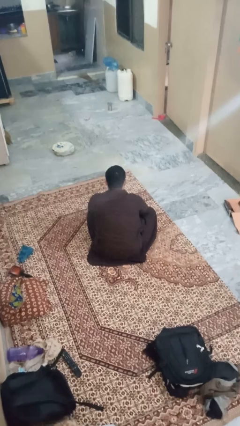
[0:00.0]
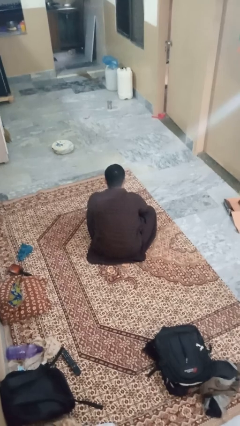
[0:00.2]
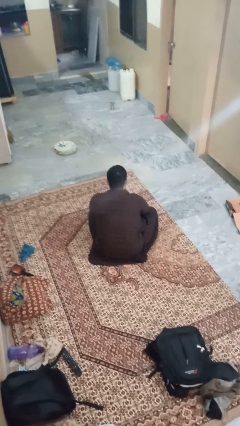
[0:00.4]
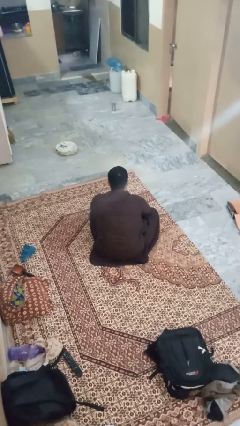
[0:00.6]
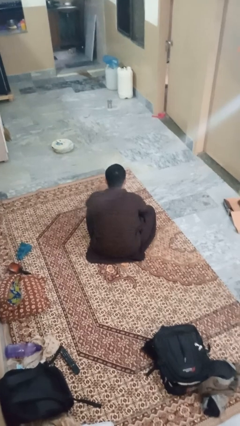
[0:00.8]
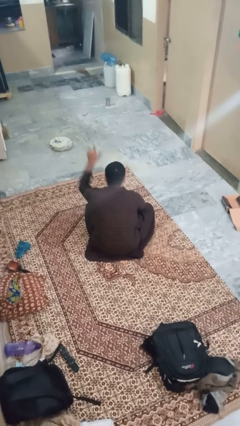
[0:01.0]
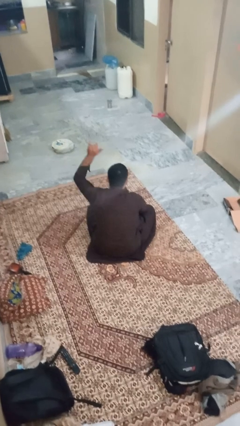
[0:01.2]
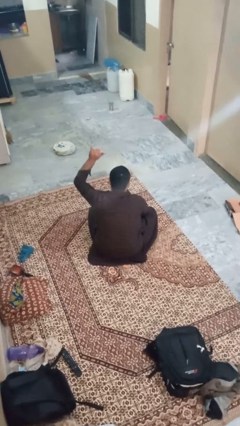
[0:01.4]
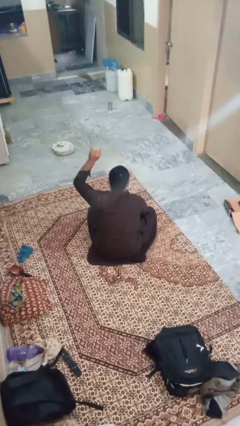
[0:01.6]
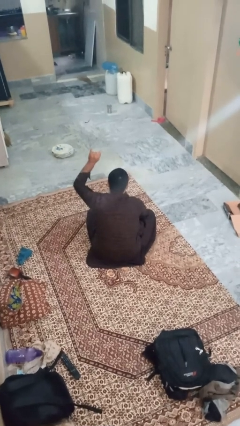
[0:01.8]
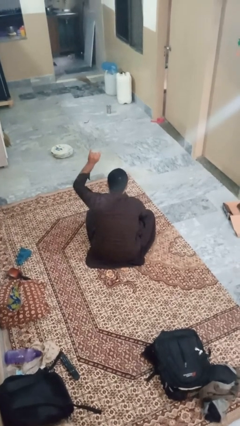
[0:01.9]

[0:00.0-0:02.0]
person gestures hang loose

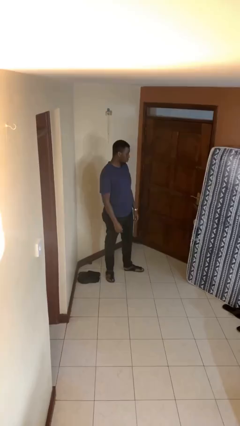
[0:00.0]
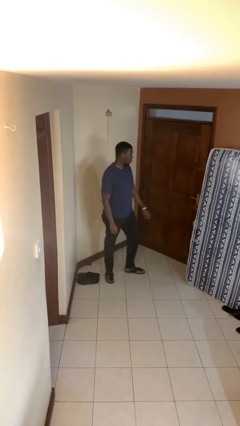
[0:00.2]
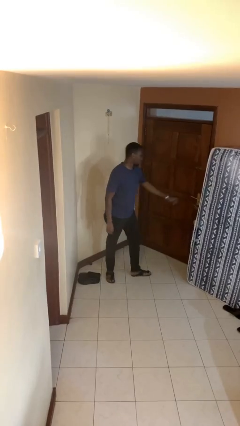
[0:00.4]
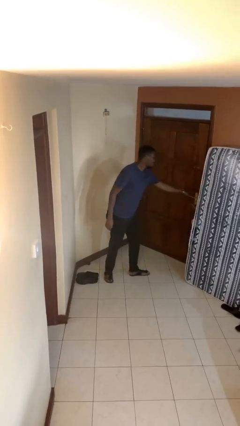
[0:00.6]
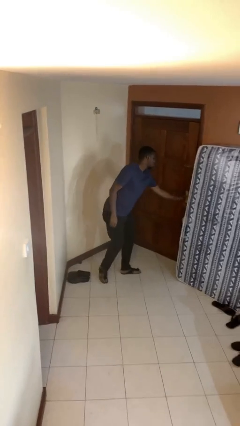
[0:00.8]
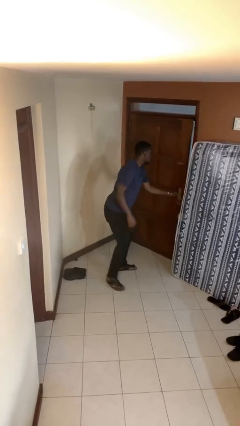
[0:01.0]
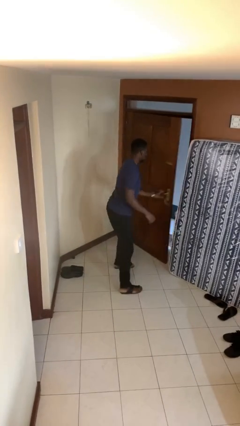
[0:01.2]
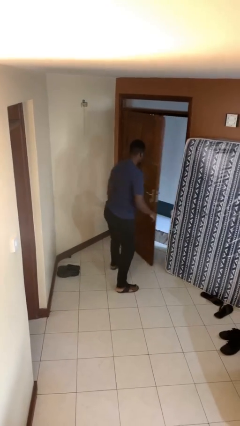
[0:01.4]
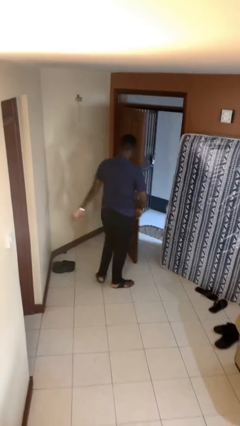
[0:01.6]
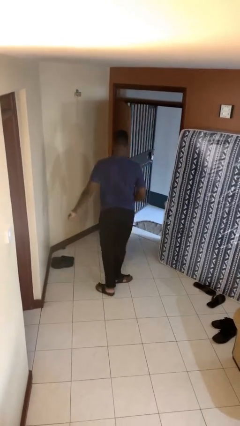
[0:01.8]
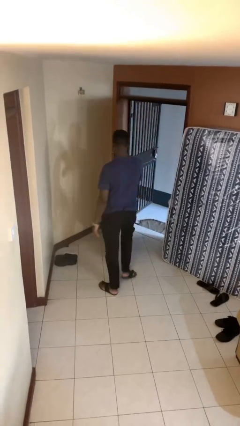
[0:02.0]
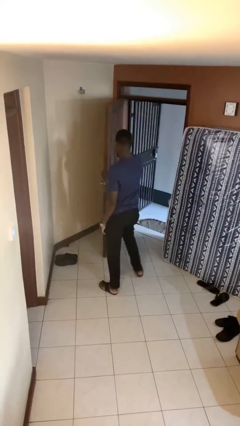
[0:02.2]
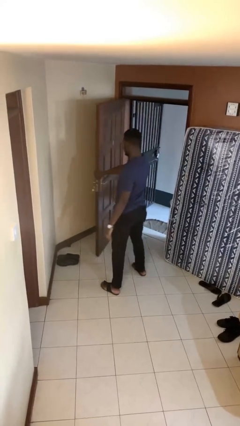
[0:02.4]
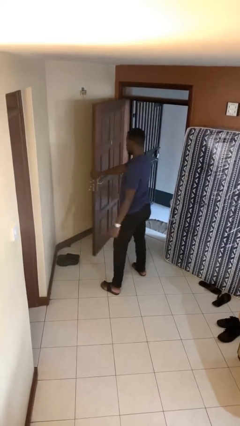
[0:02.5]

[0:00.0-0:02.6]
person opens facility door

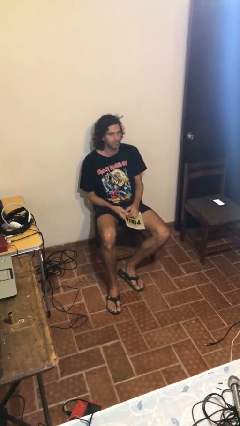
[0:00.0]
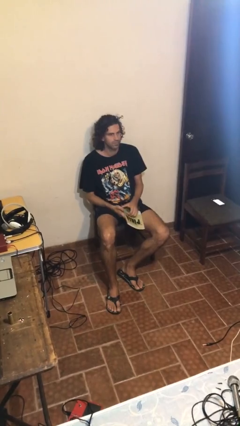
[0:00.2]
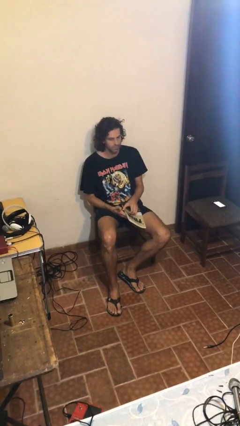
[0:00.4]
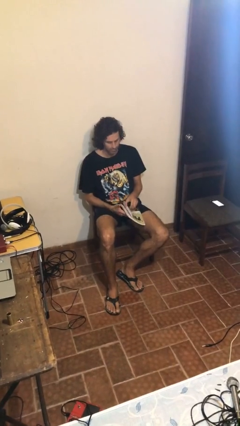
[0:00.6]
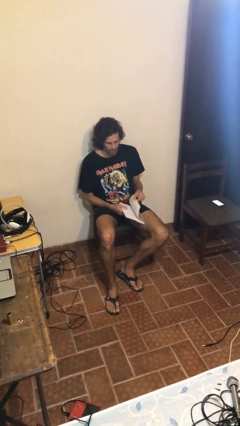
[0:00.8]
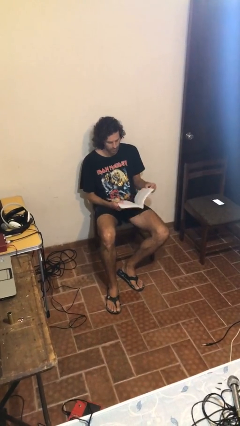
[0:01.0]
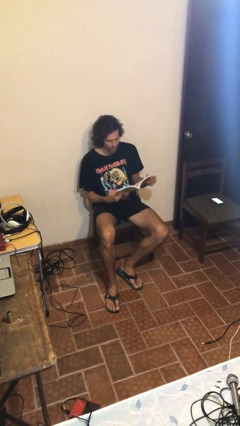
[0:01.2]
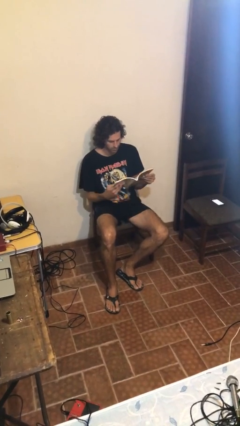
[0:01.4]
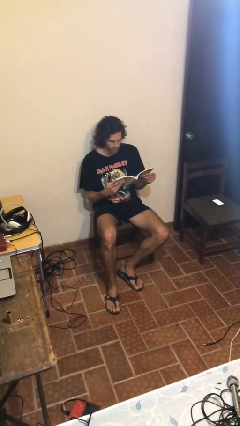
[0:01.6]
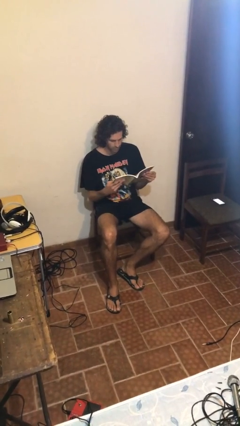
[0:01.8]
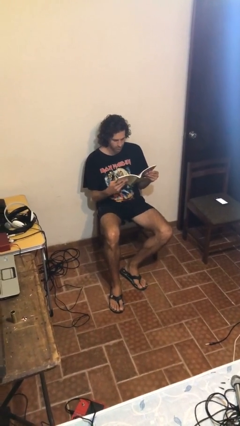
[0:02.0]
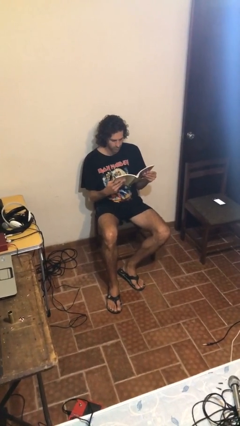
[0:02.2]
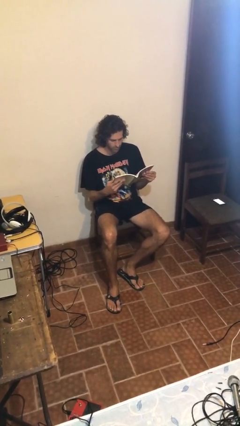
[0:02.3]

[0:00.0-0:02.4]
person reads document

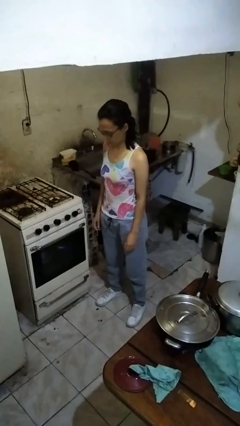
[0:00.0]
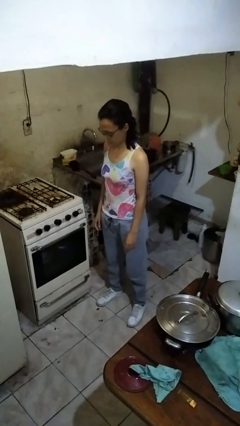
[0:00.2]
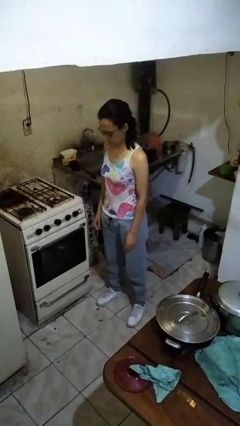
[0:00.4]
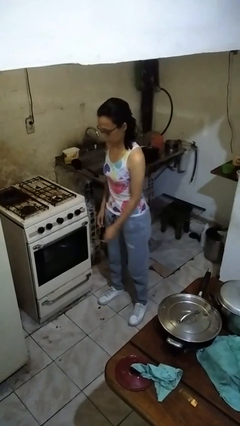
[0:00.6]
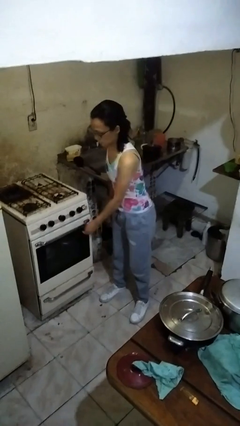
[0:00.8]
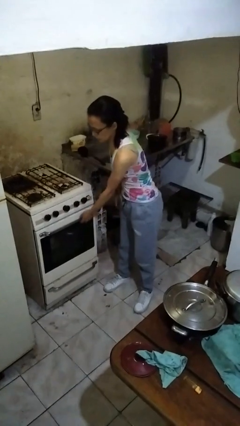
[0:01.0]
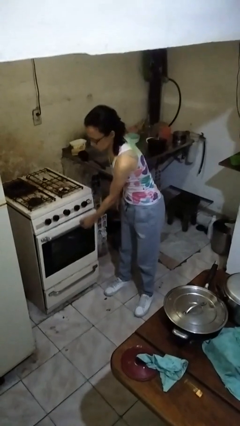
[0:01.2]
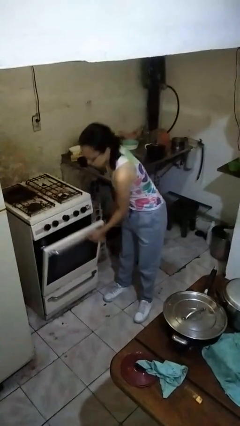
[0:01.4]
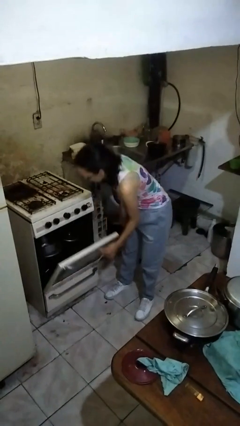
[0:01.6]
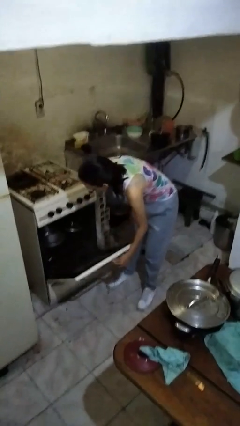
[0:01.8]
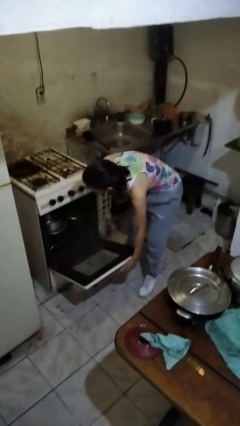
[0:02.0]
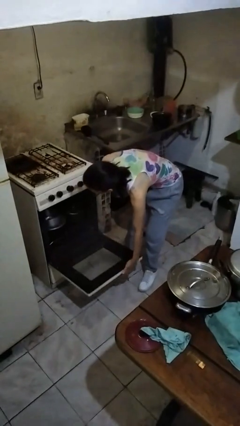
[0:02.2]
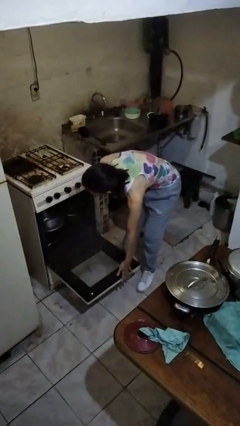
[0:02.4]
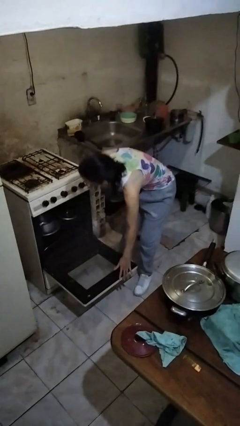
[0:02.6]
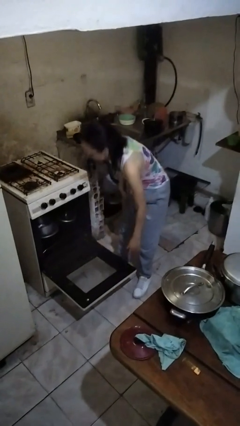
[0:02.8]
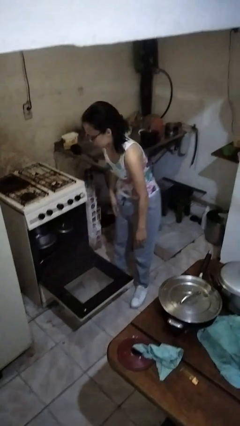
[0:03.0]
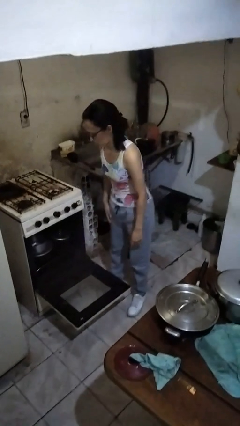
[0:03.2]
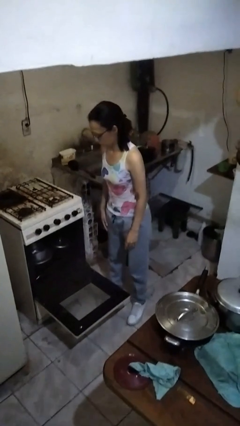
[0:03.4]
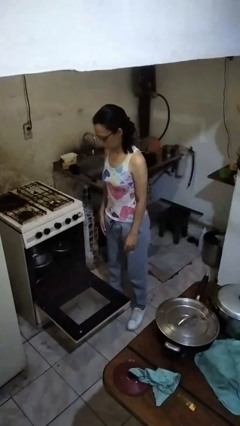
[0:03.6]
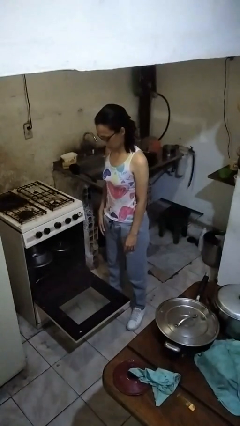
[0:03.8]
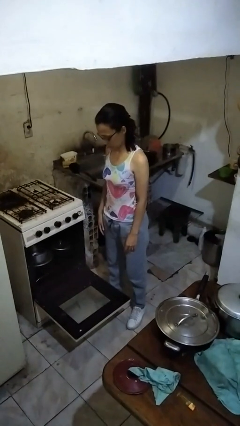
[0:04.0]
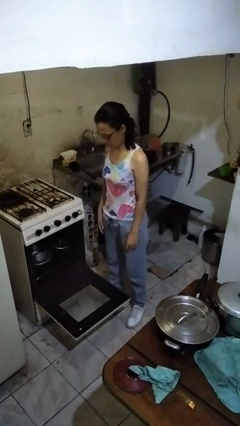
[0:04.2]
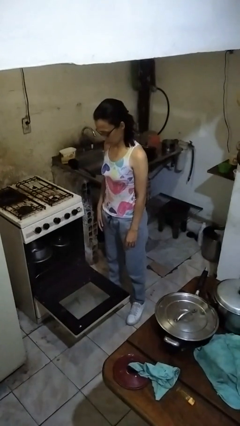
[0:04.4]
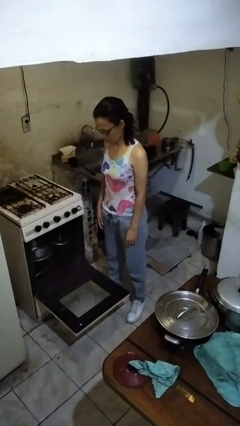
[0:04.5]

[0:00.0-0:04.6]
person opens oven door

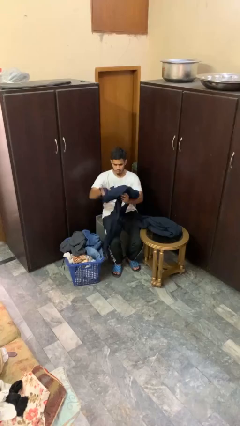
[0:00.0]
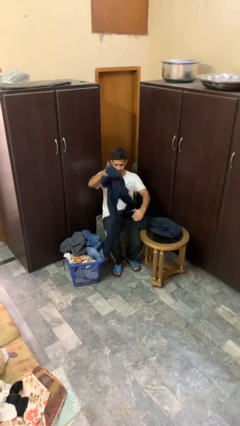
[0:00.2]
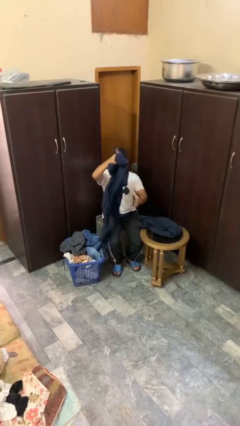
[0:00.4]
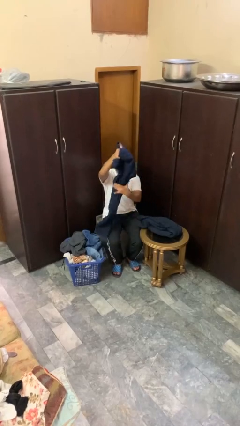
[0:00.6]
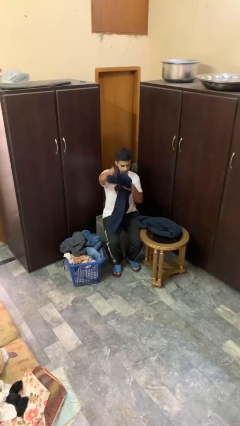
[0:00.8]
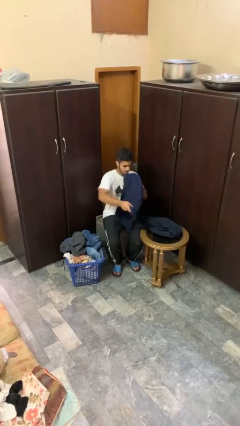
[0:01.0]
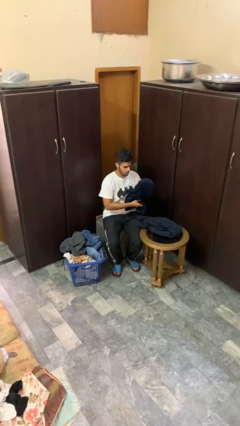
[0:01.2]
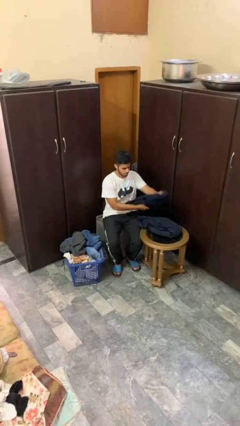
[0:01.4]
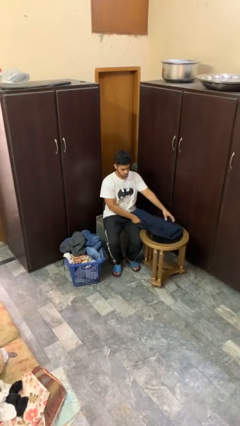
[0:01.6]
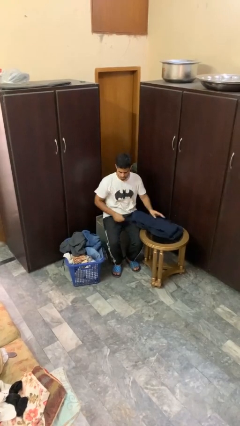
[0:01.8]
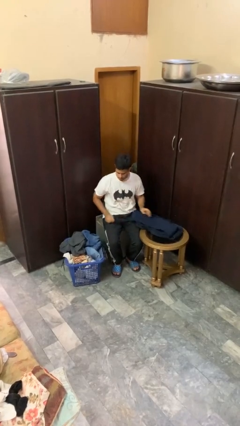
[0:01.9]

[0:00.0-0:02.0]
person folds pants

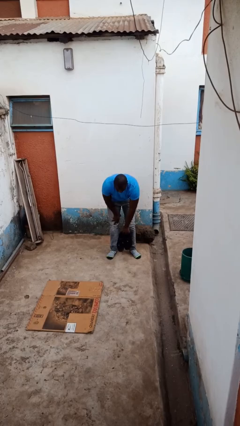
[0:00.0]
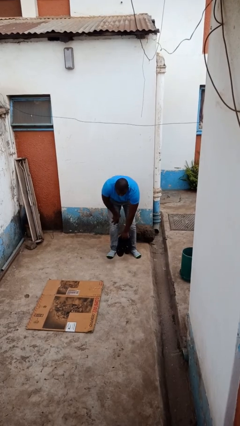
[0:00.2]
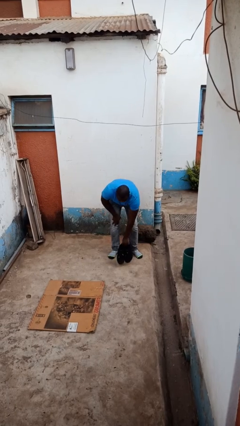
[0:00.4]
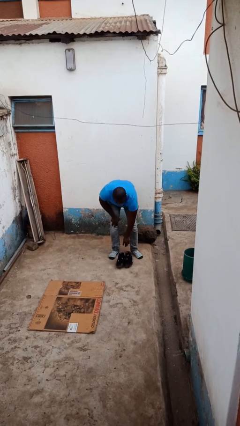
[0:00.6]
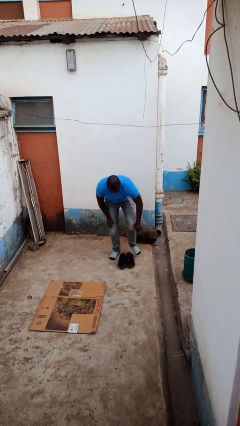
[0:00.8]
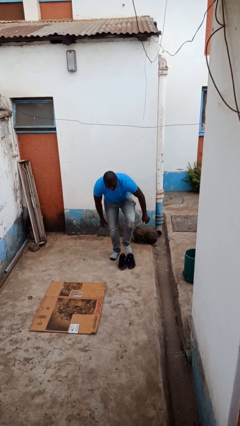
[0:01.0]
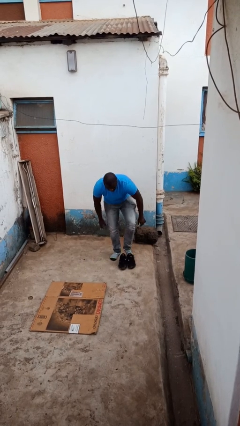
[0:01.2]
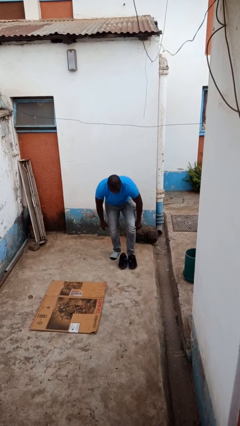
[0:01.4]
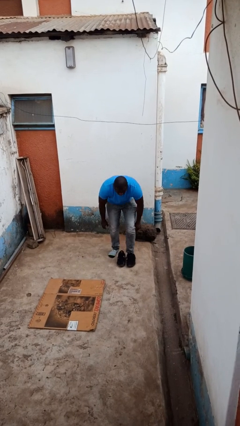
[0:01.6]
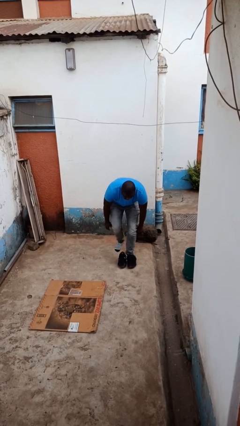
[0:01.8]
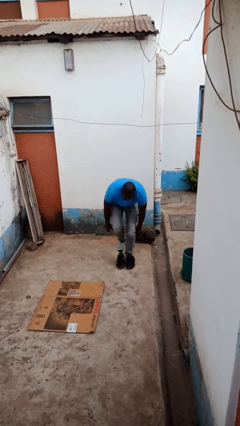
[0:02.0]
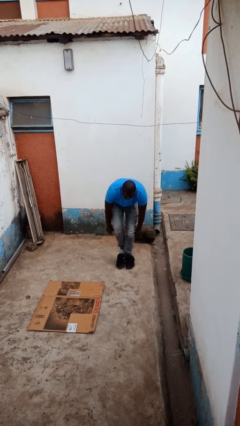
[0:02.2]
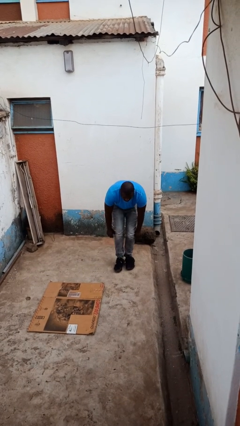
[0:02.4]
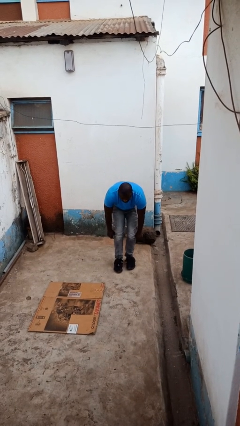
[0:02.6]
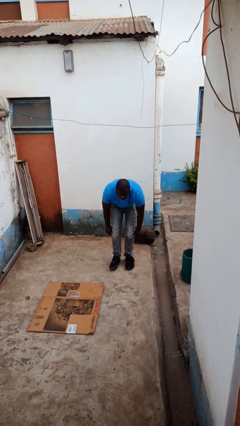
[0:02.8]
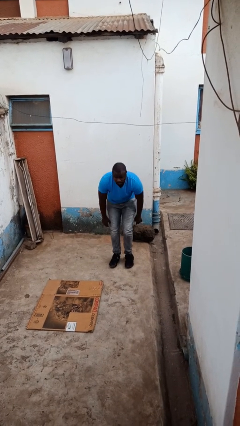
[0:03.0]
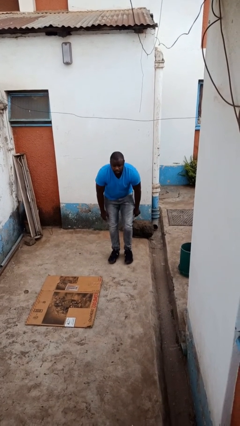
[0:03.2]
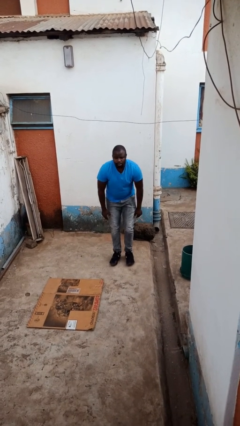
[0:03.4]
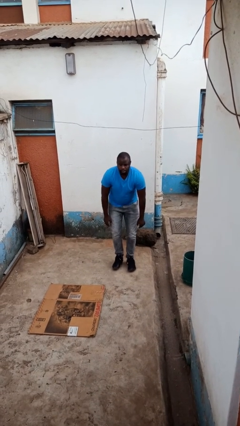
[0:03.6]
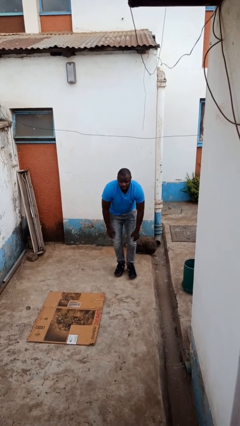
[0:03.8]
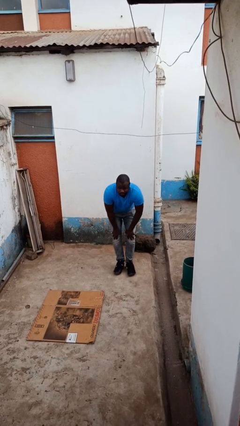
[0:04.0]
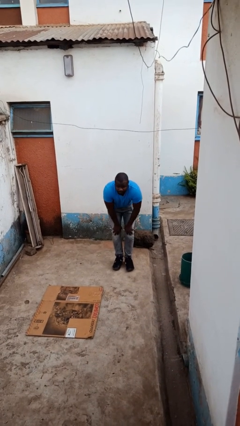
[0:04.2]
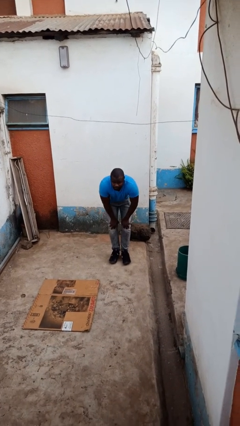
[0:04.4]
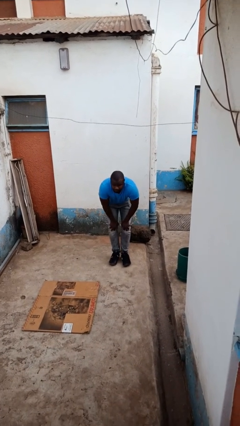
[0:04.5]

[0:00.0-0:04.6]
person puts on shoes
